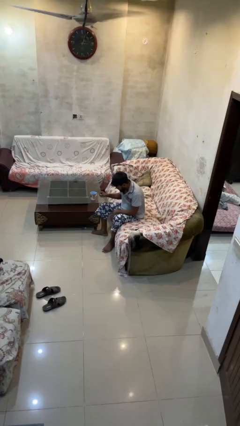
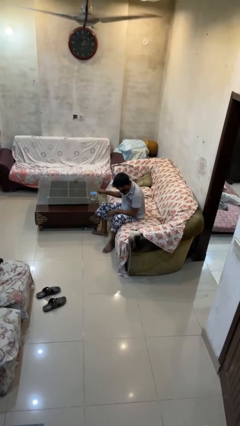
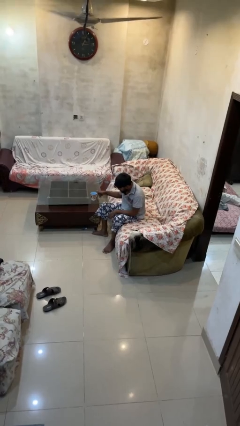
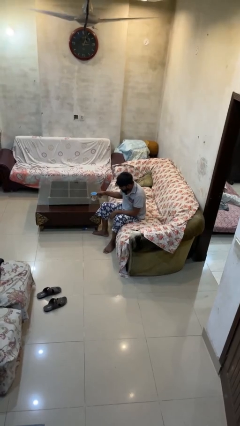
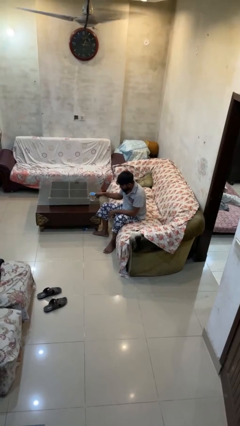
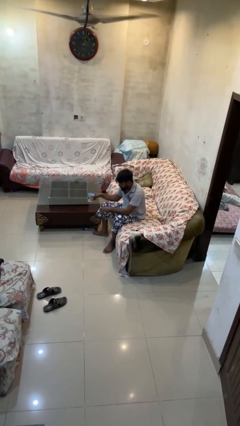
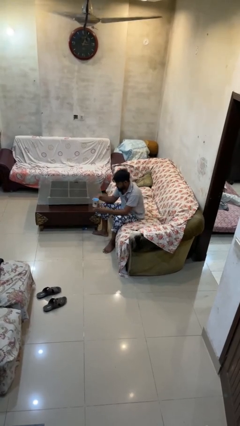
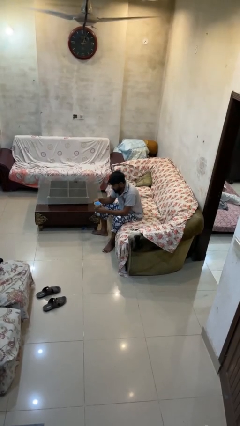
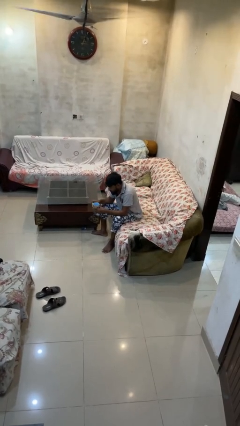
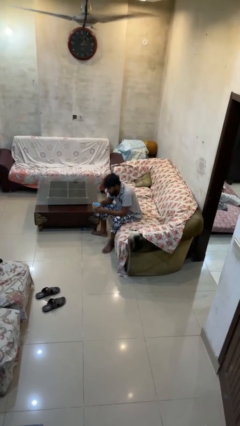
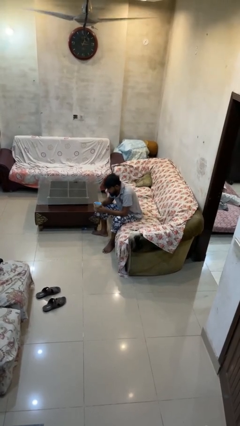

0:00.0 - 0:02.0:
person picks up object from table

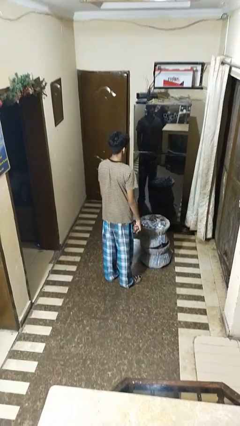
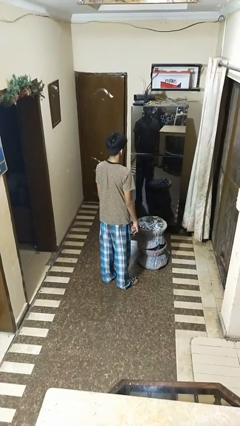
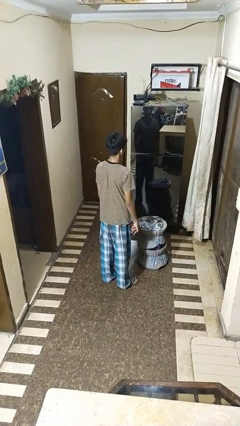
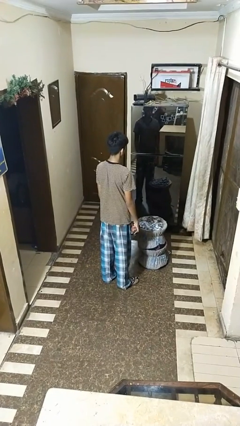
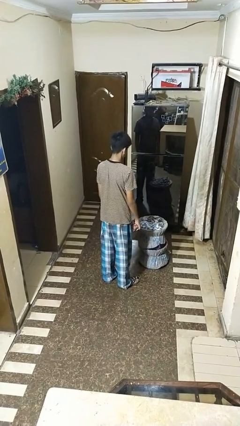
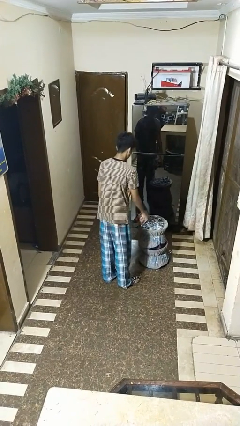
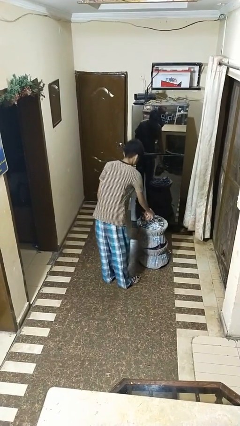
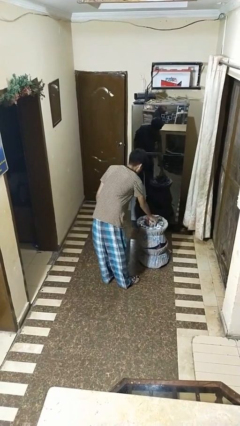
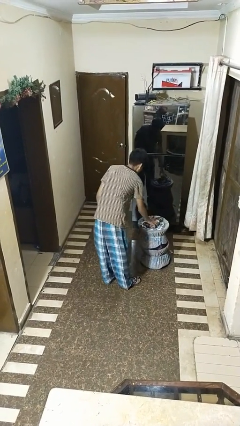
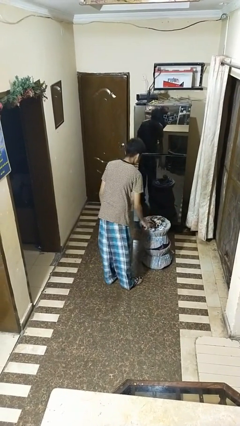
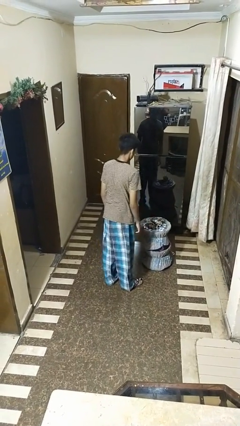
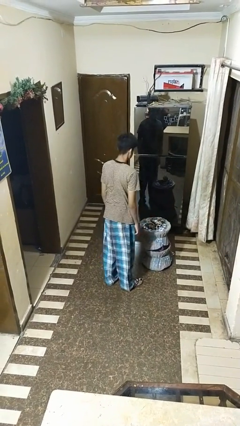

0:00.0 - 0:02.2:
person puts object into basket

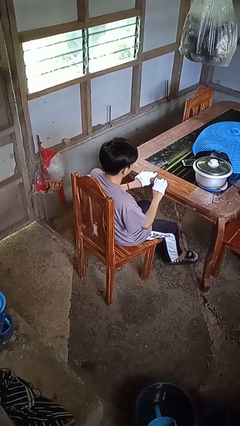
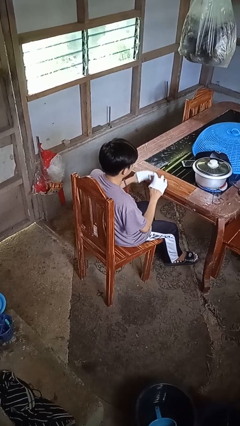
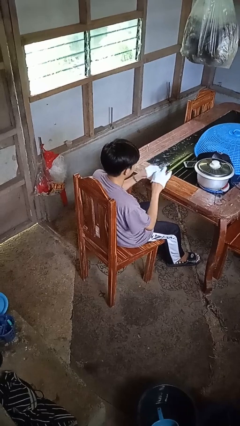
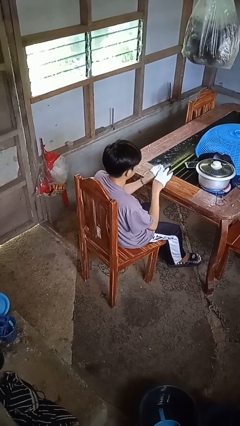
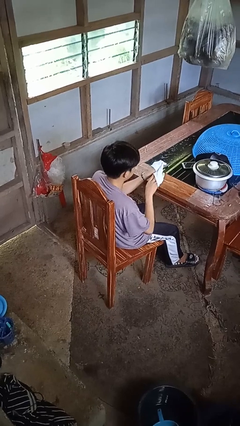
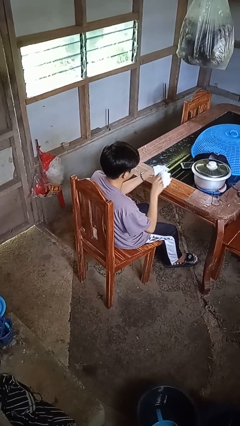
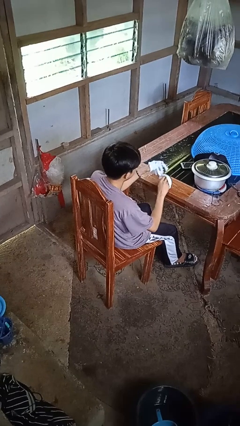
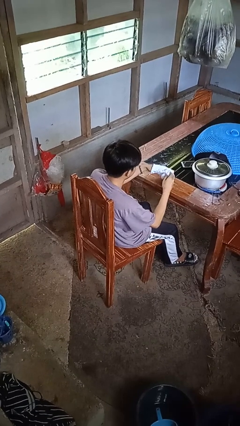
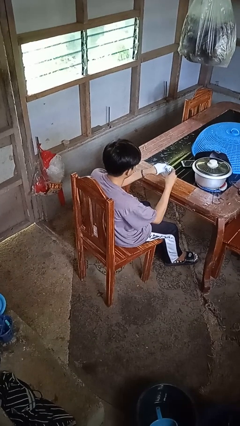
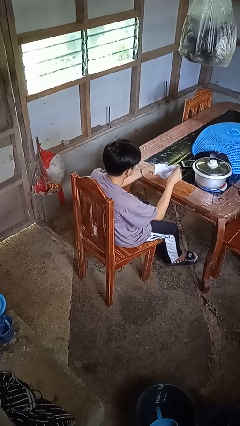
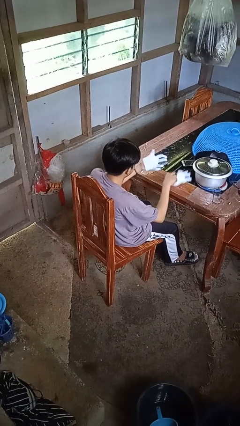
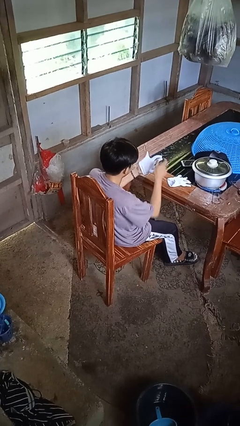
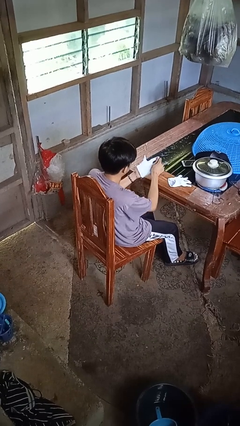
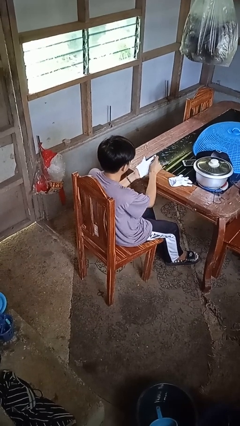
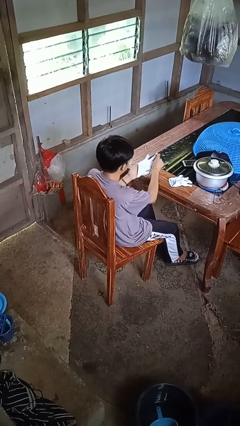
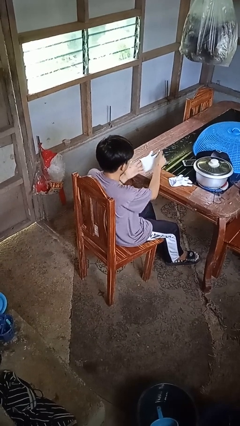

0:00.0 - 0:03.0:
person takes off gloves

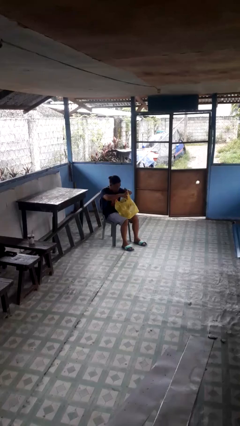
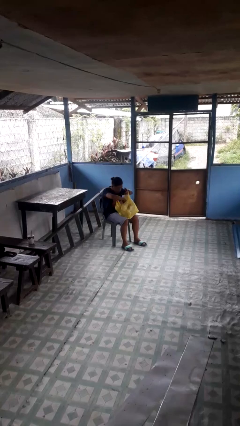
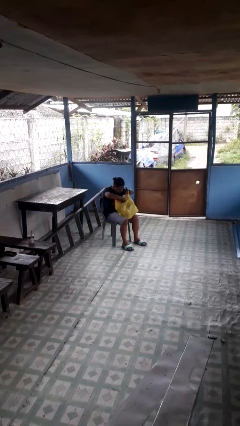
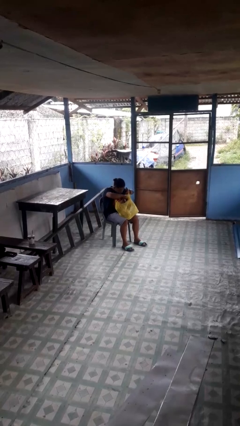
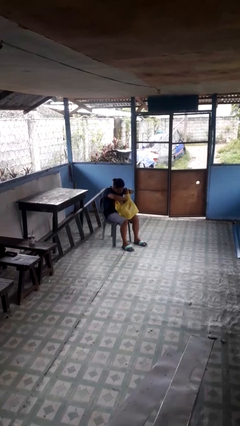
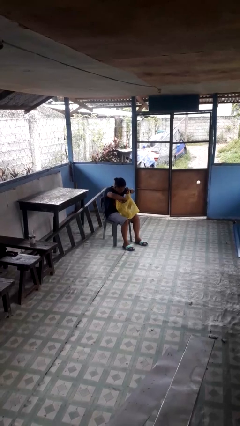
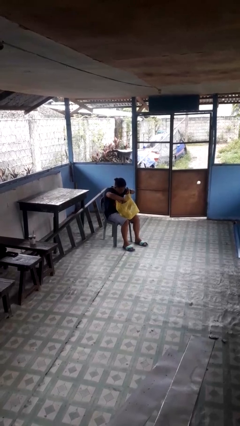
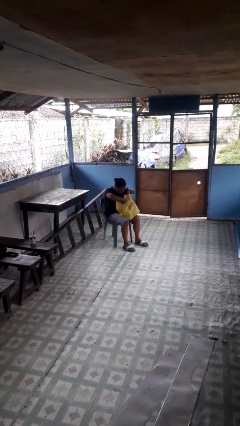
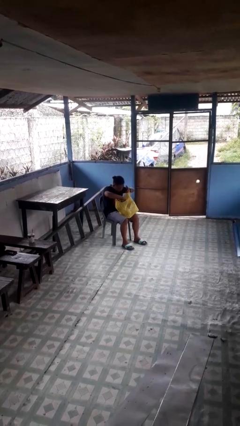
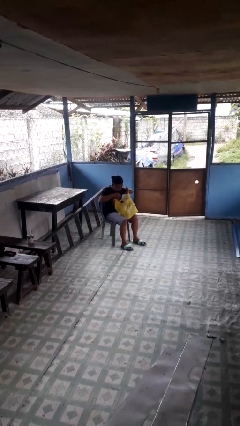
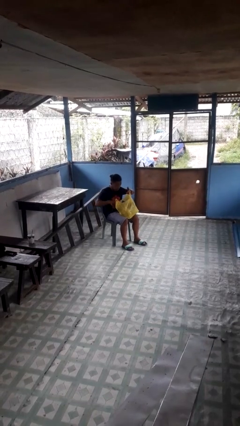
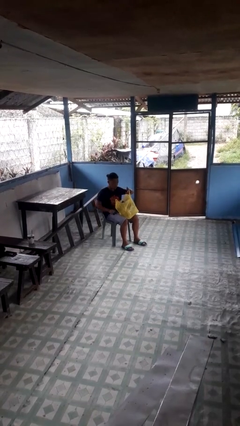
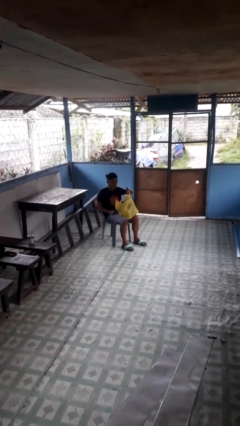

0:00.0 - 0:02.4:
person searches in bag

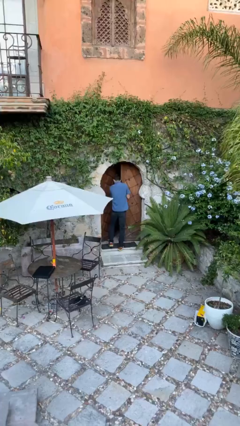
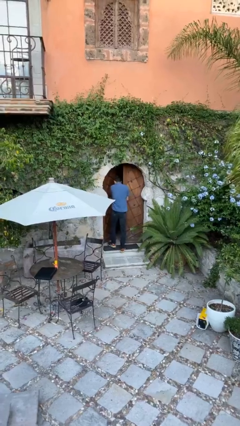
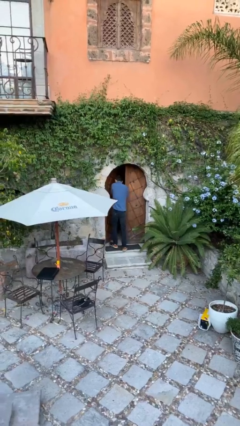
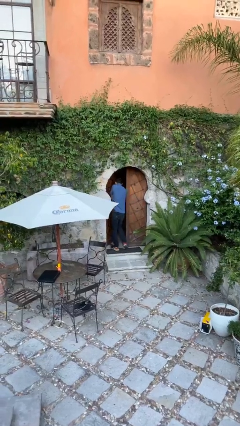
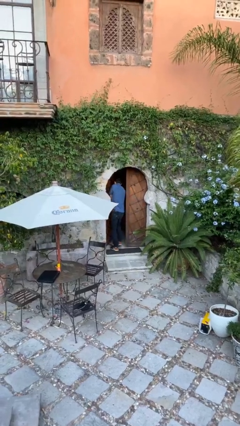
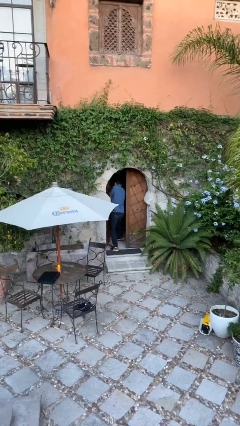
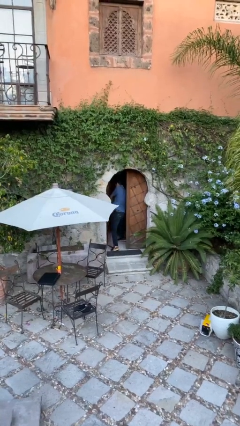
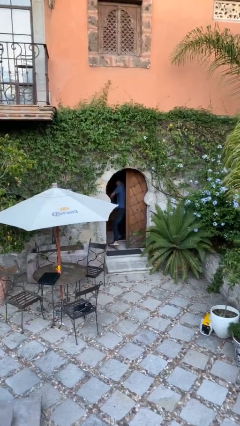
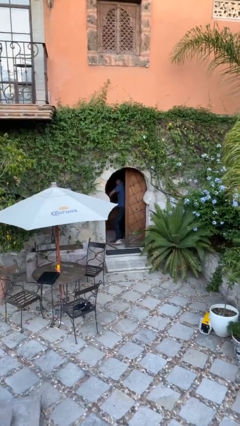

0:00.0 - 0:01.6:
person exits scene through structure

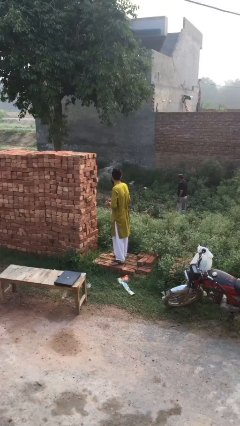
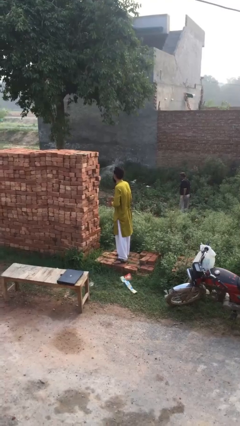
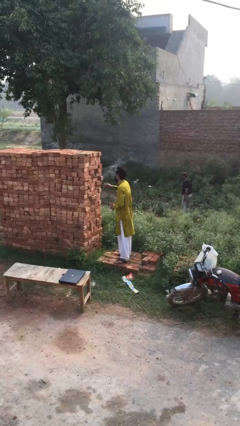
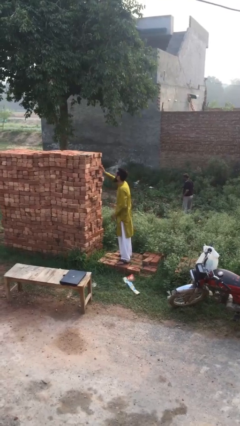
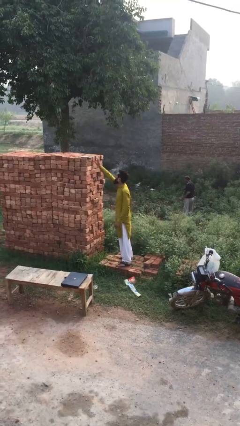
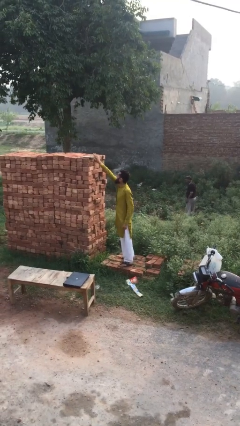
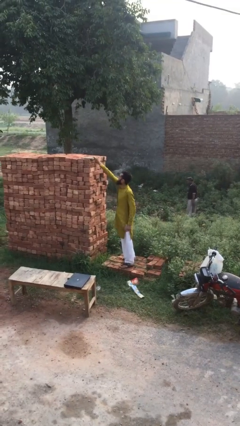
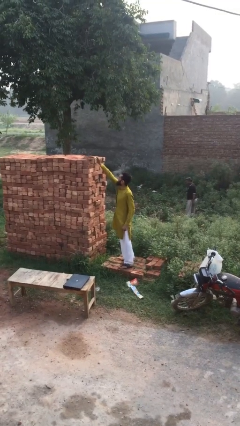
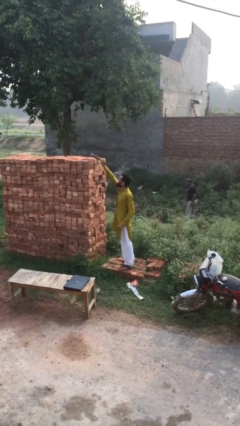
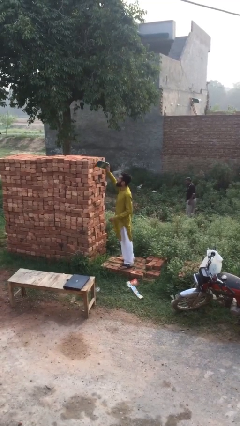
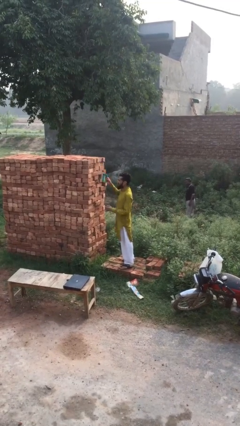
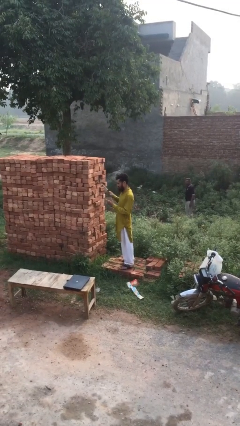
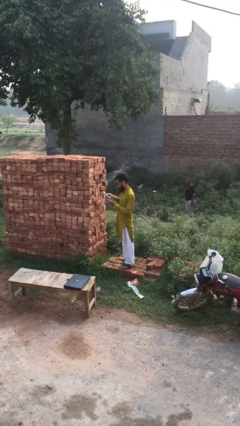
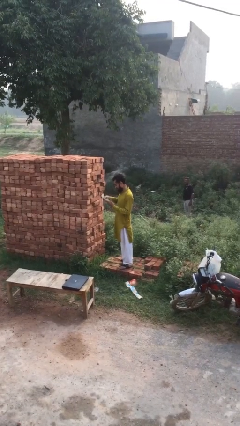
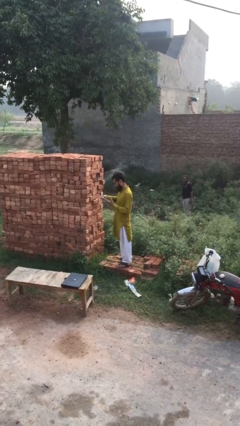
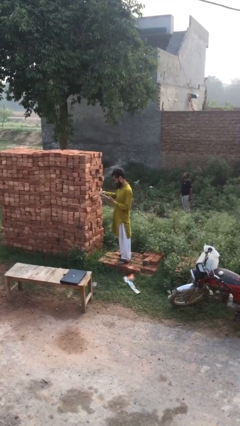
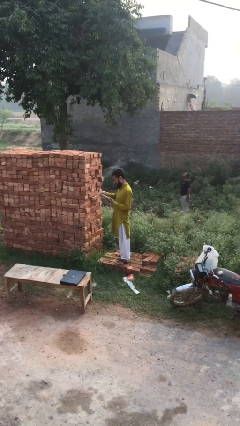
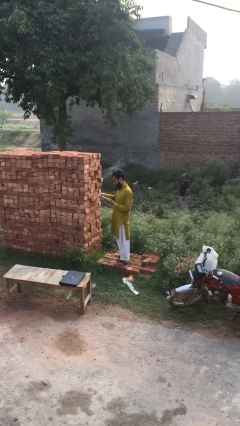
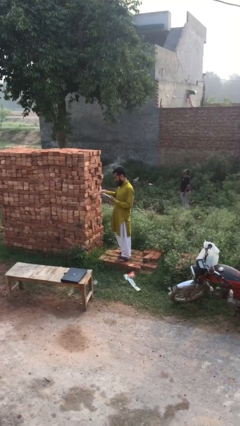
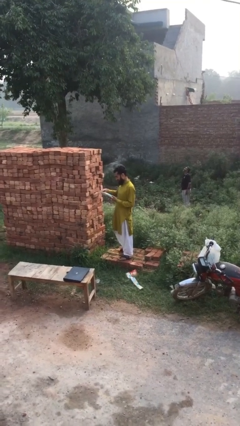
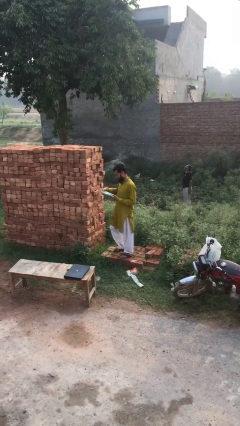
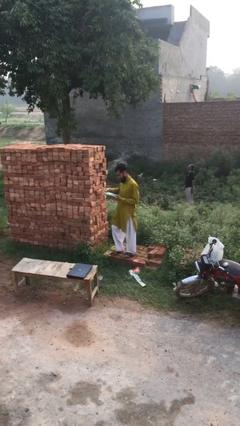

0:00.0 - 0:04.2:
person picks up object from shelf

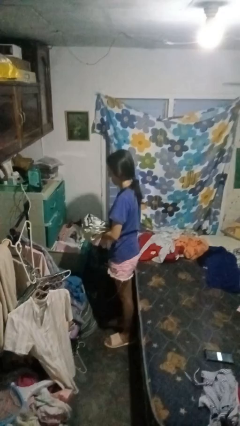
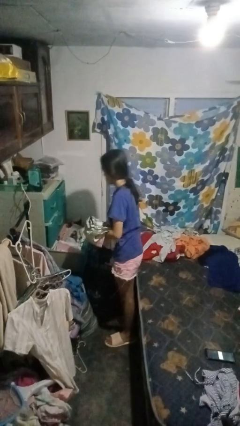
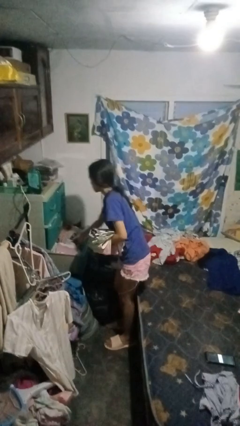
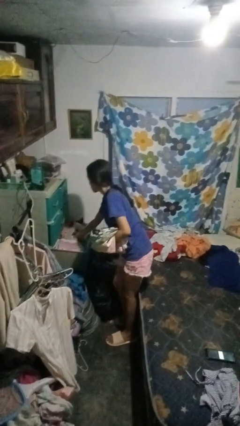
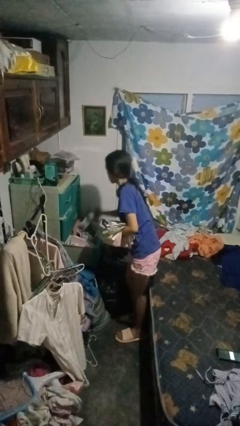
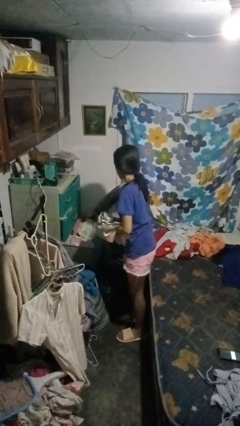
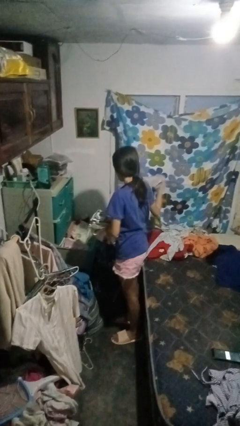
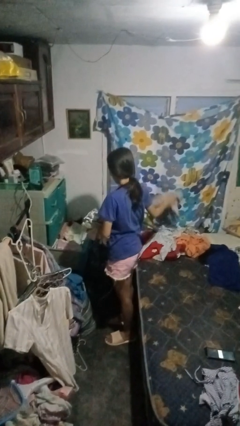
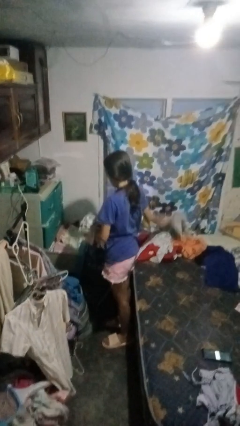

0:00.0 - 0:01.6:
person takes clothes from dresser

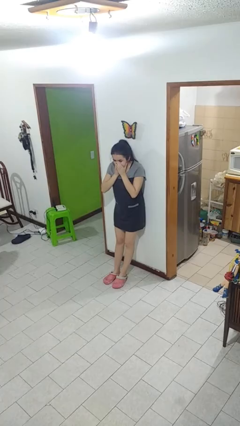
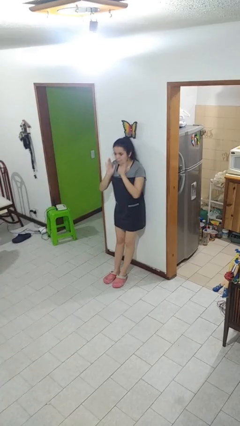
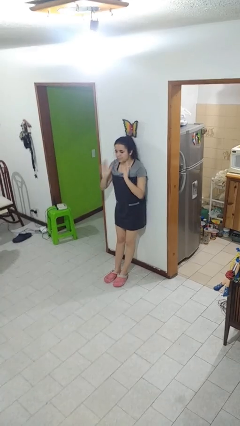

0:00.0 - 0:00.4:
person sneezes into hand
